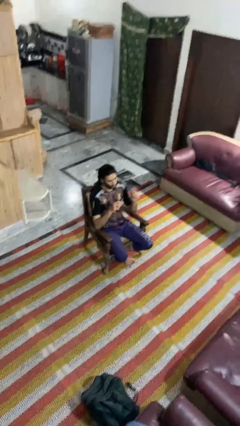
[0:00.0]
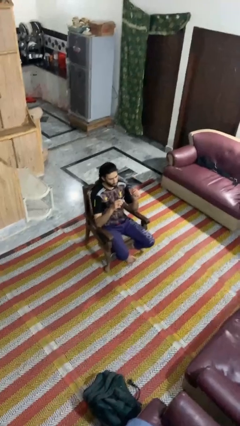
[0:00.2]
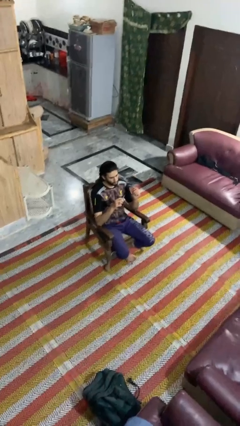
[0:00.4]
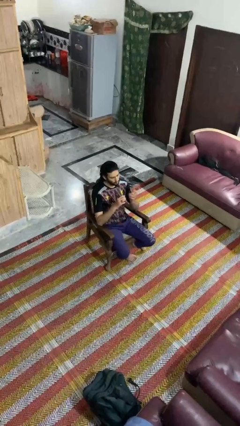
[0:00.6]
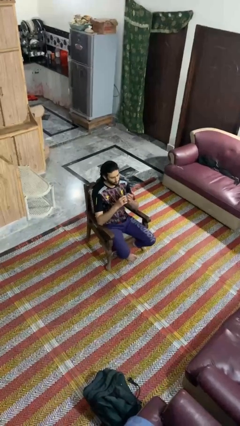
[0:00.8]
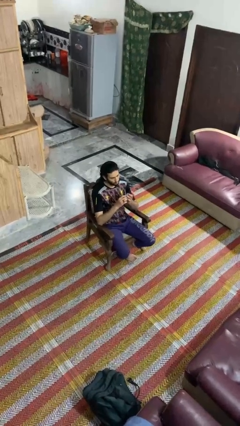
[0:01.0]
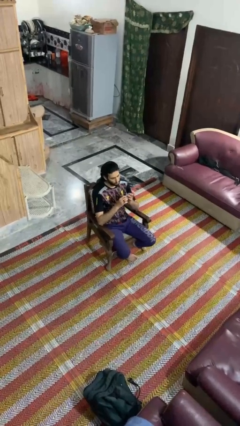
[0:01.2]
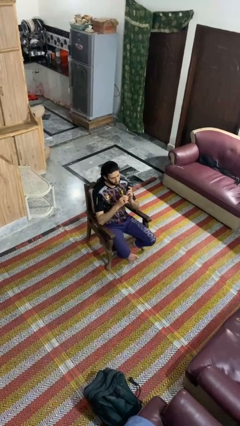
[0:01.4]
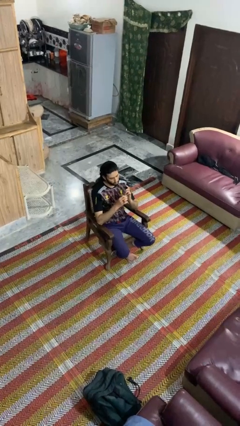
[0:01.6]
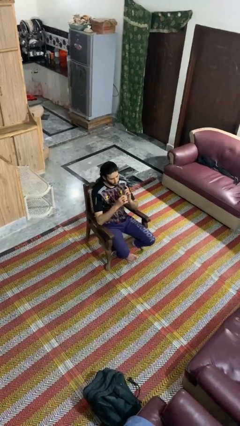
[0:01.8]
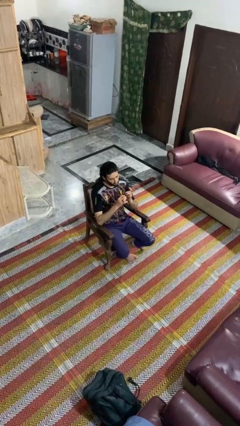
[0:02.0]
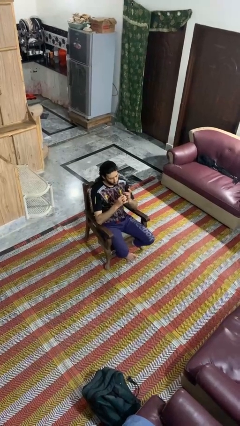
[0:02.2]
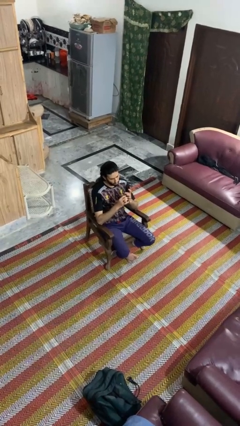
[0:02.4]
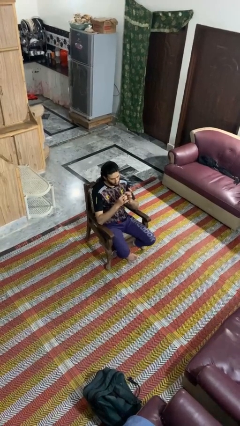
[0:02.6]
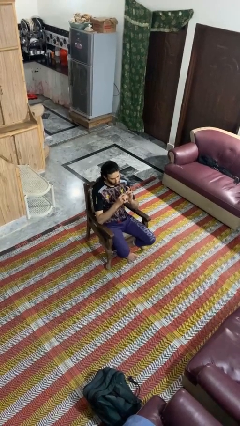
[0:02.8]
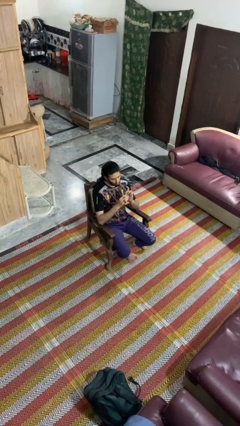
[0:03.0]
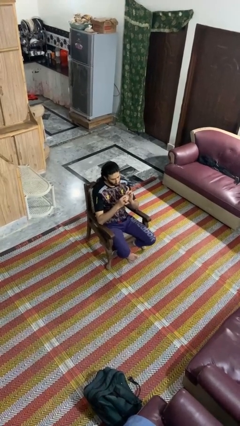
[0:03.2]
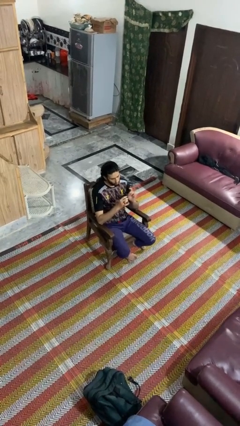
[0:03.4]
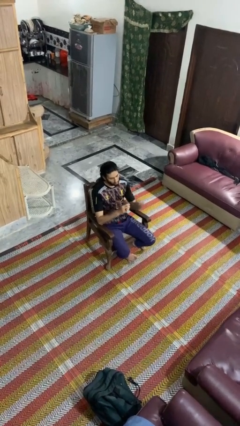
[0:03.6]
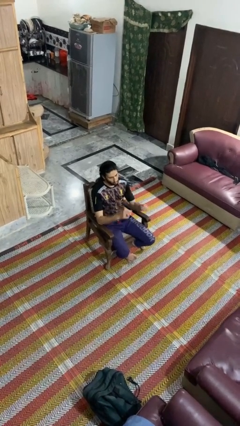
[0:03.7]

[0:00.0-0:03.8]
person files fingernails

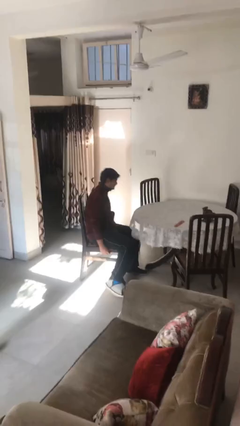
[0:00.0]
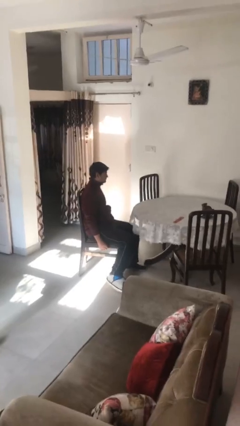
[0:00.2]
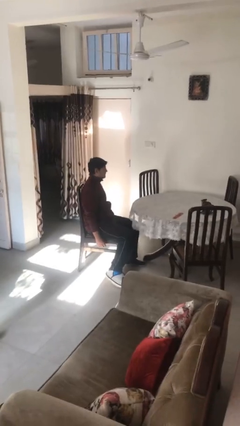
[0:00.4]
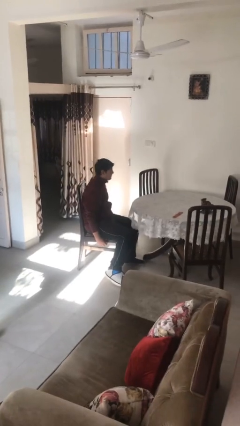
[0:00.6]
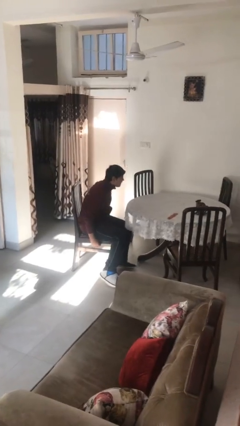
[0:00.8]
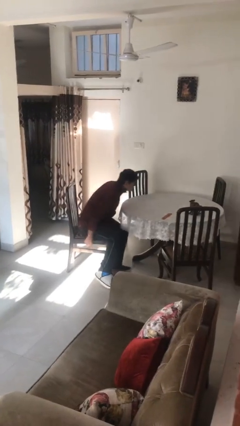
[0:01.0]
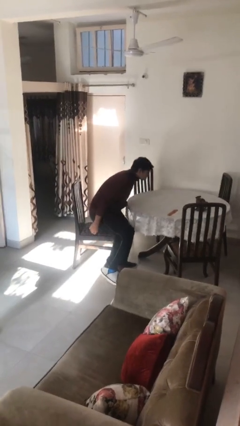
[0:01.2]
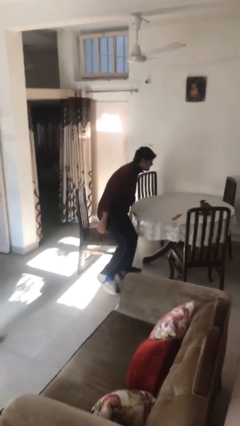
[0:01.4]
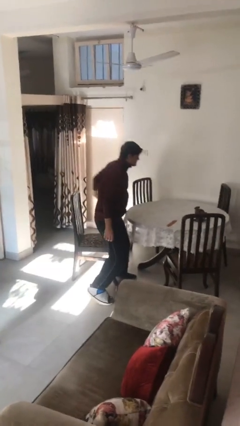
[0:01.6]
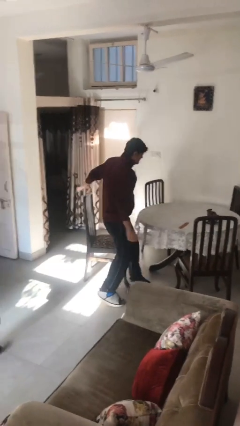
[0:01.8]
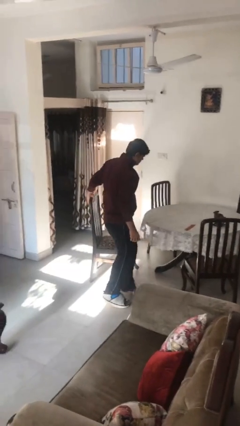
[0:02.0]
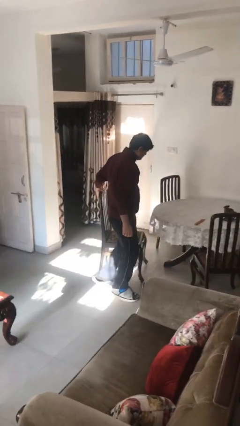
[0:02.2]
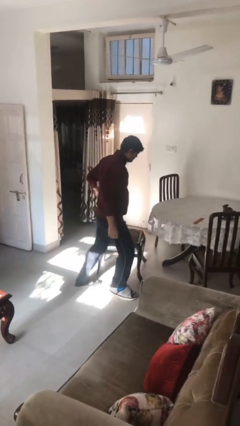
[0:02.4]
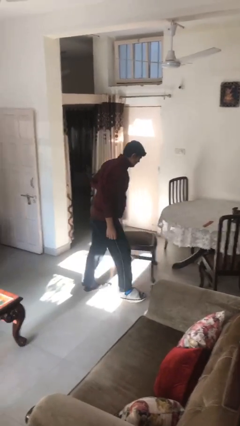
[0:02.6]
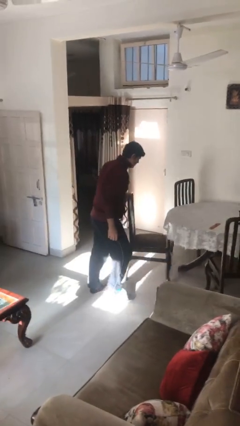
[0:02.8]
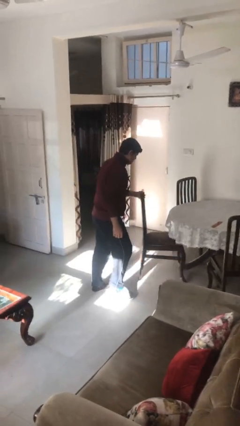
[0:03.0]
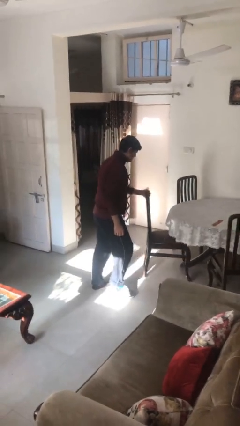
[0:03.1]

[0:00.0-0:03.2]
person stands up

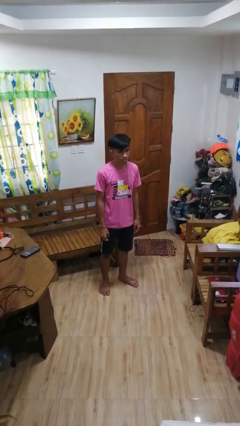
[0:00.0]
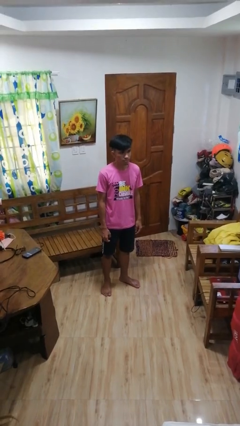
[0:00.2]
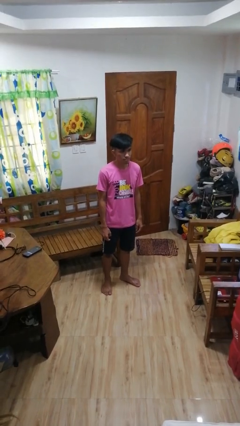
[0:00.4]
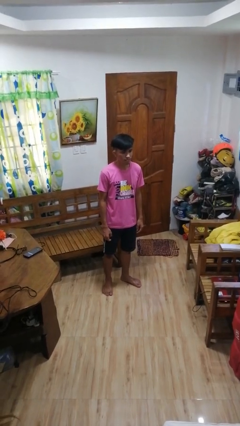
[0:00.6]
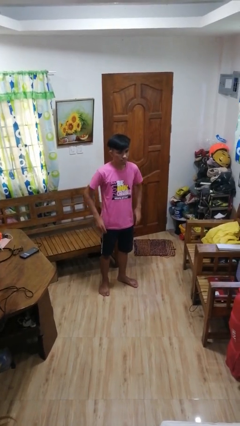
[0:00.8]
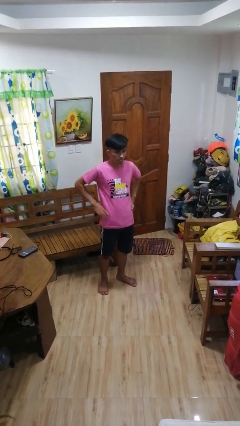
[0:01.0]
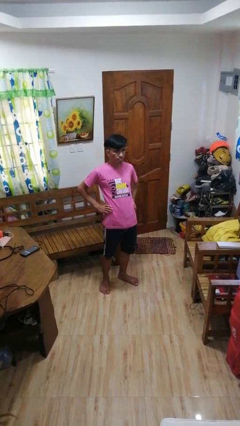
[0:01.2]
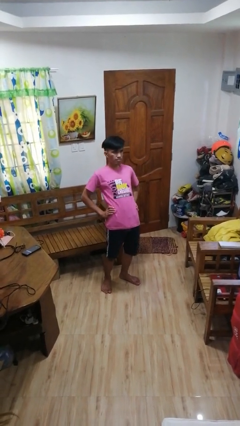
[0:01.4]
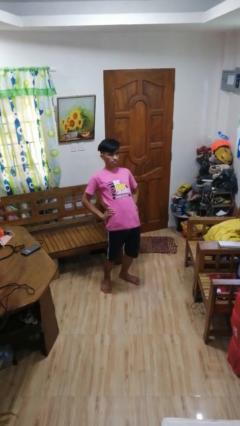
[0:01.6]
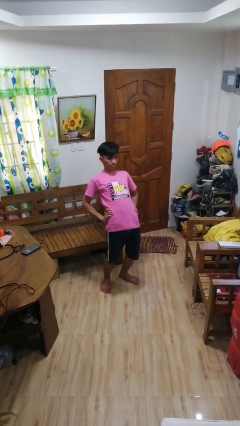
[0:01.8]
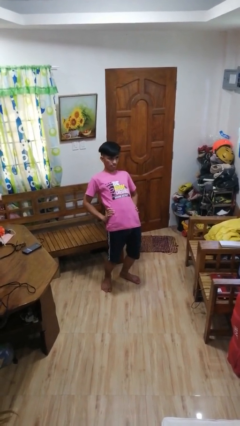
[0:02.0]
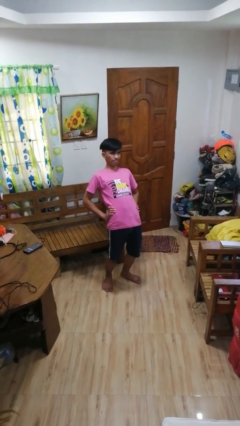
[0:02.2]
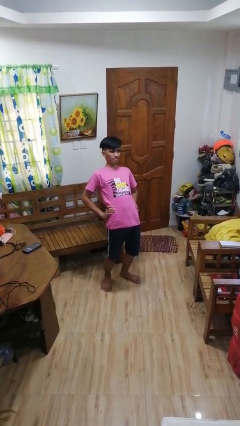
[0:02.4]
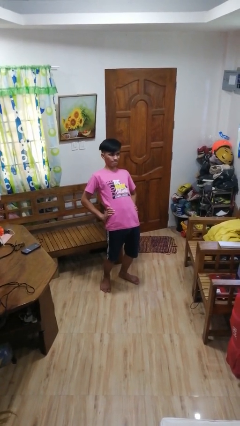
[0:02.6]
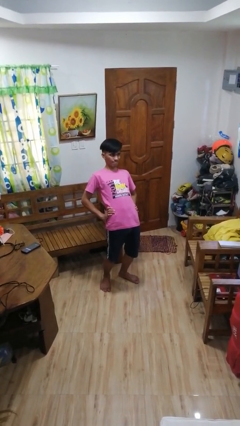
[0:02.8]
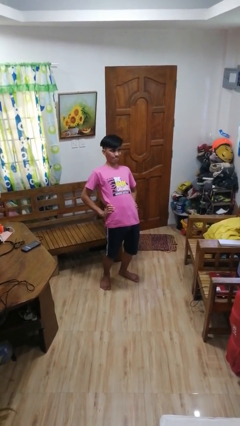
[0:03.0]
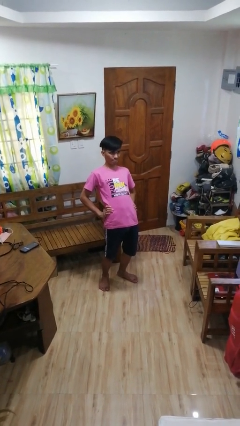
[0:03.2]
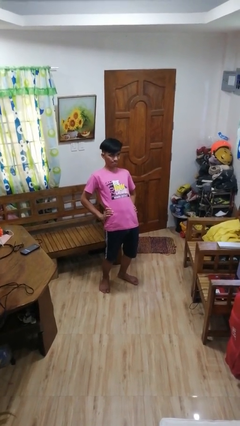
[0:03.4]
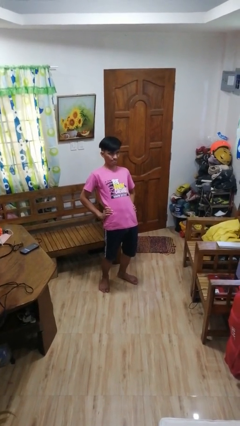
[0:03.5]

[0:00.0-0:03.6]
person stretches back

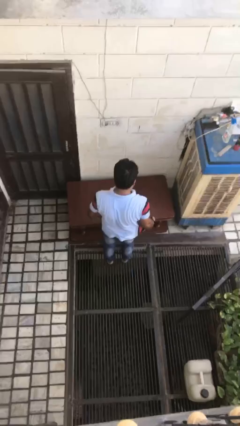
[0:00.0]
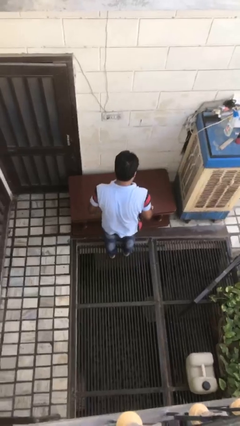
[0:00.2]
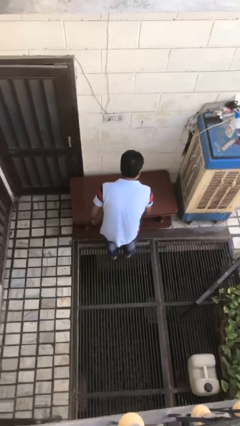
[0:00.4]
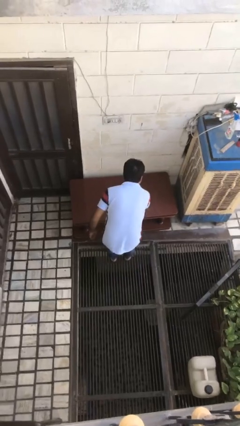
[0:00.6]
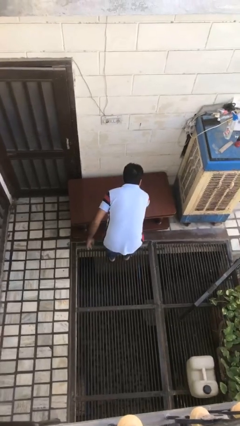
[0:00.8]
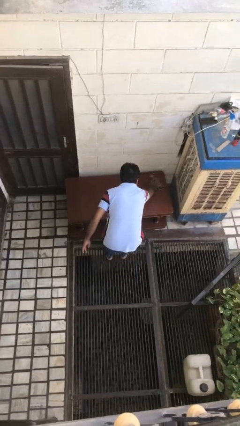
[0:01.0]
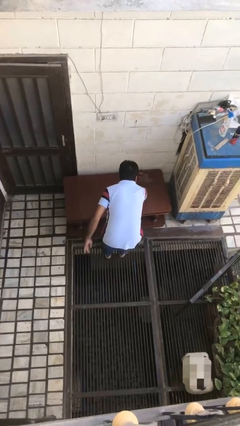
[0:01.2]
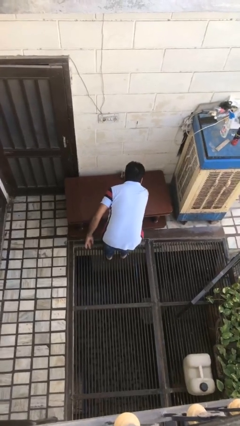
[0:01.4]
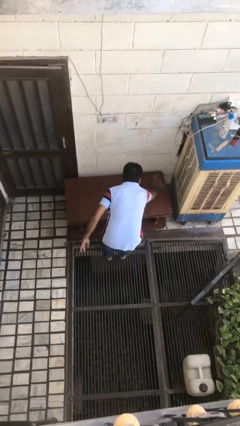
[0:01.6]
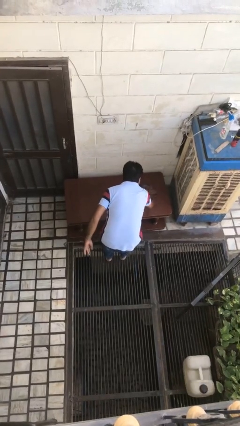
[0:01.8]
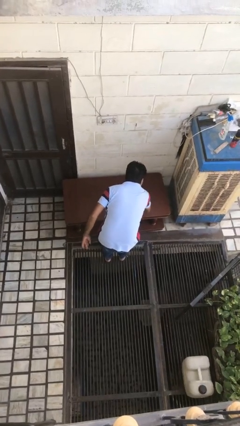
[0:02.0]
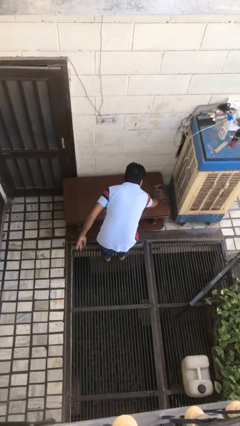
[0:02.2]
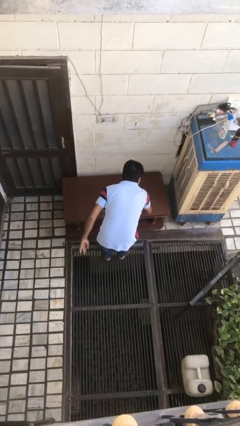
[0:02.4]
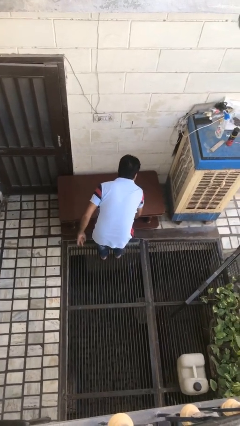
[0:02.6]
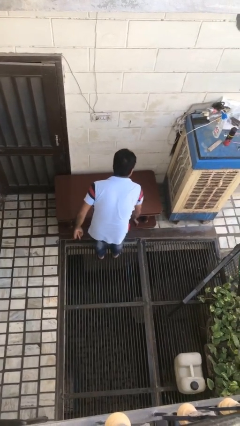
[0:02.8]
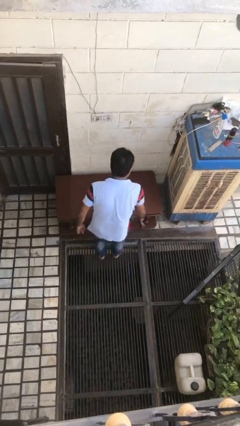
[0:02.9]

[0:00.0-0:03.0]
person cleans table with rag

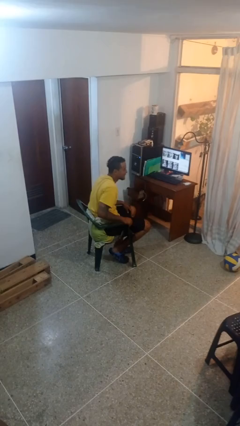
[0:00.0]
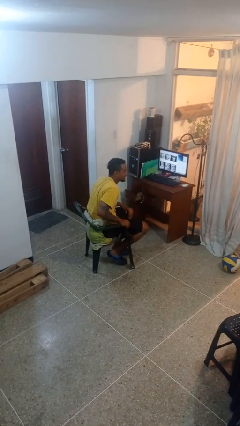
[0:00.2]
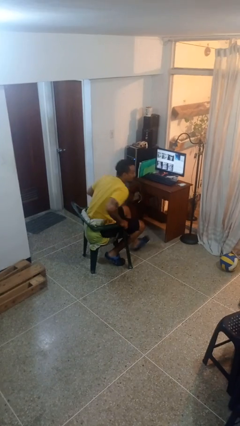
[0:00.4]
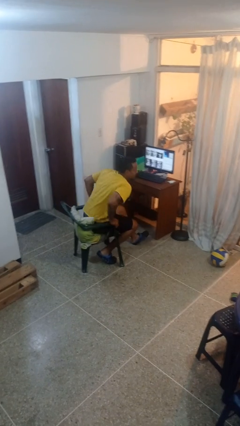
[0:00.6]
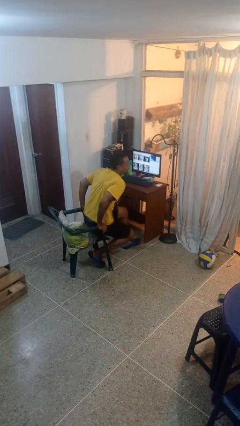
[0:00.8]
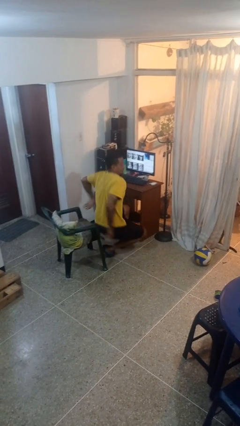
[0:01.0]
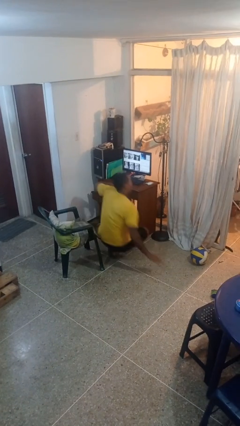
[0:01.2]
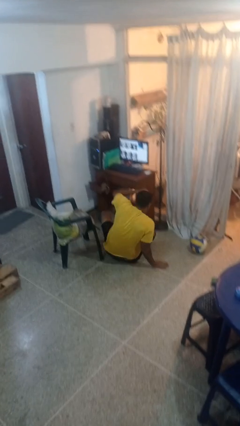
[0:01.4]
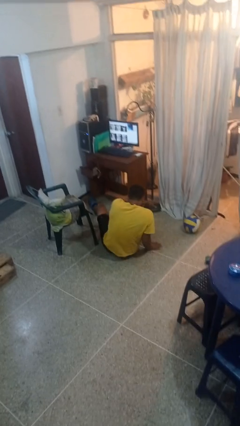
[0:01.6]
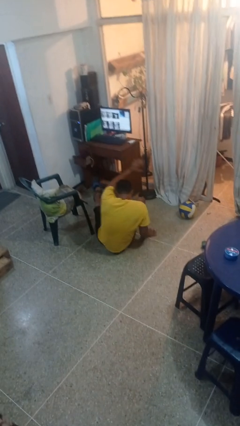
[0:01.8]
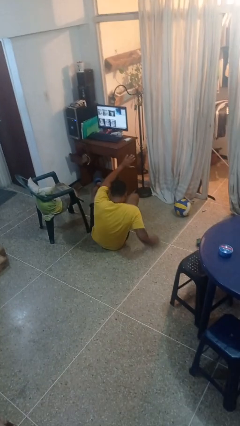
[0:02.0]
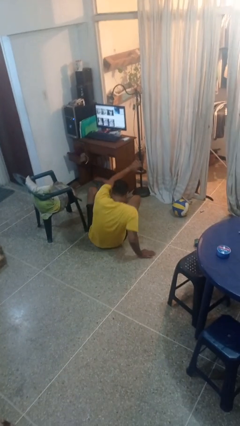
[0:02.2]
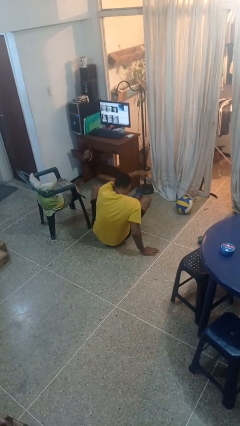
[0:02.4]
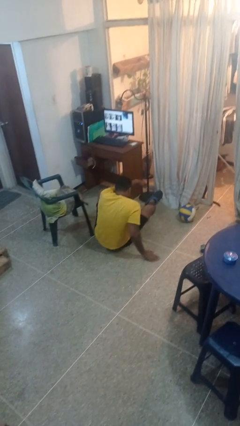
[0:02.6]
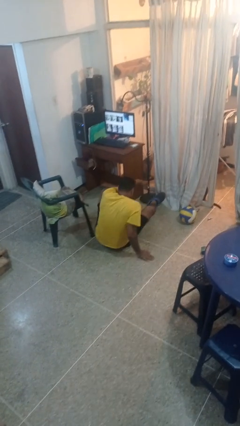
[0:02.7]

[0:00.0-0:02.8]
person falls from chair

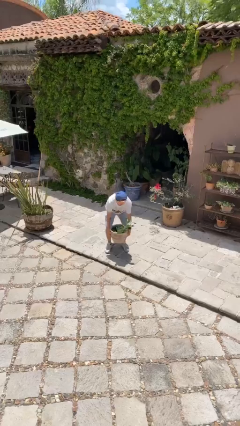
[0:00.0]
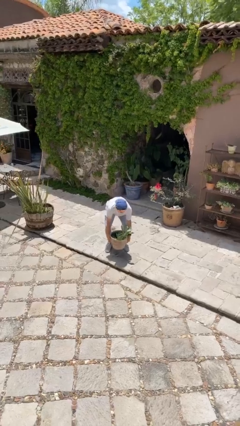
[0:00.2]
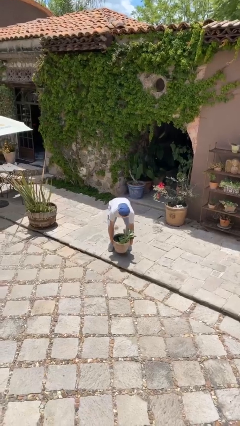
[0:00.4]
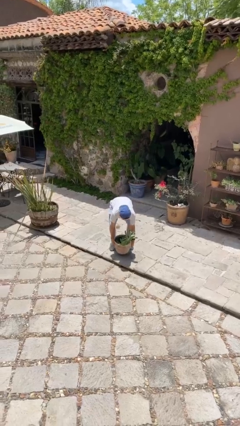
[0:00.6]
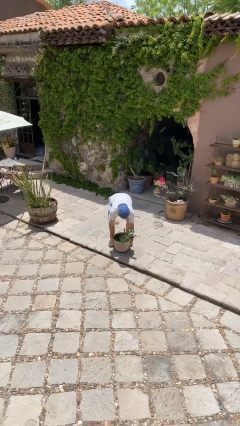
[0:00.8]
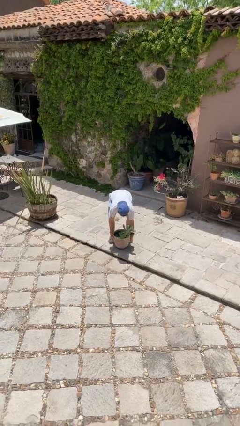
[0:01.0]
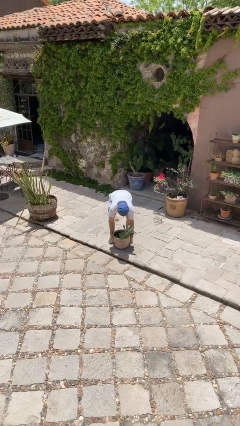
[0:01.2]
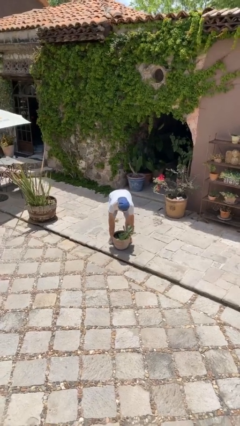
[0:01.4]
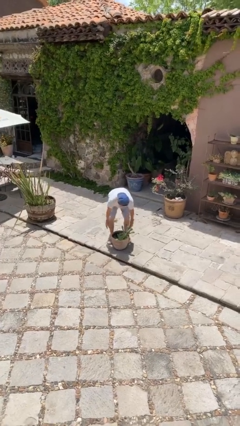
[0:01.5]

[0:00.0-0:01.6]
person puts down object on floor
